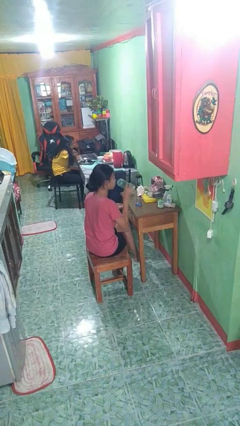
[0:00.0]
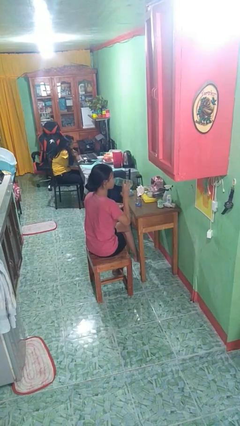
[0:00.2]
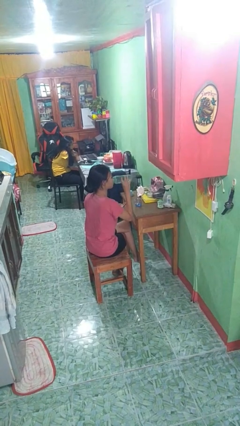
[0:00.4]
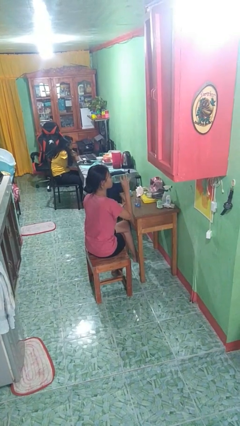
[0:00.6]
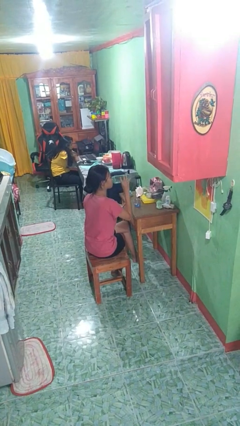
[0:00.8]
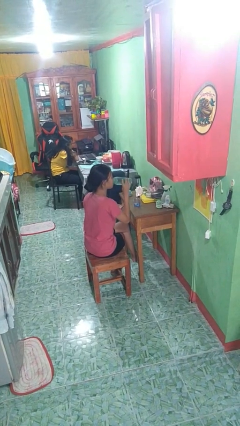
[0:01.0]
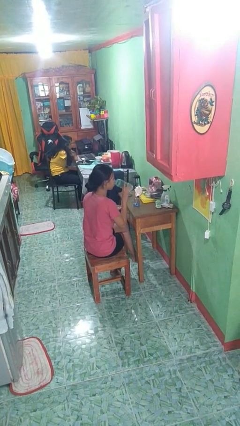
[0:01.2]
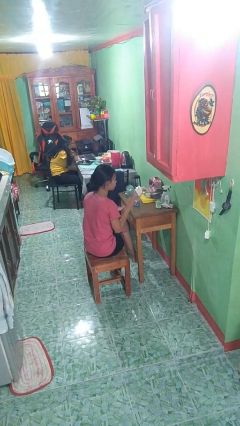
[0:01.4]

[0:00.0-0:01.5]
person drinks from cup

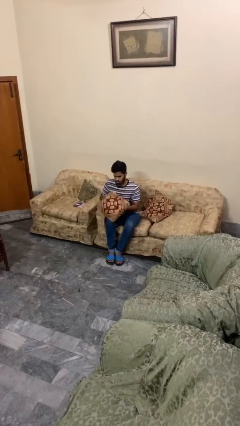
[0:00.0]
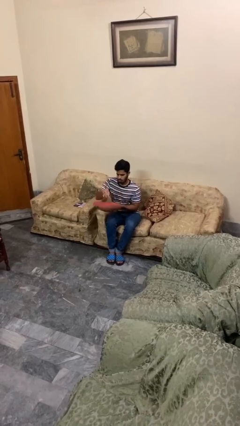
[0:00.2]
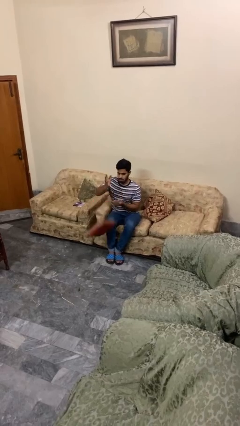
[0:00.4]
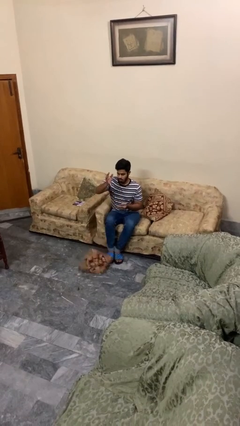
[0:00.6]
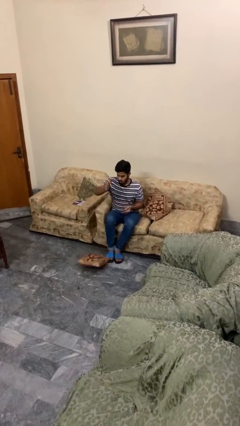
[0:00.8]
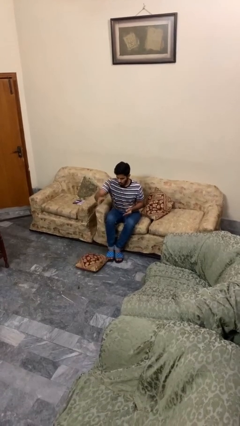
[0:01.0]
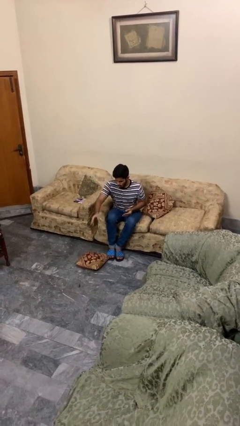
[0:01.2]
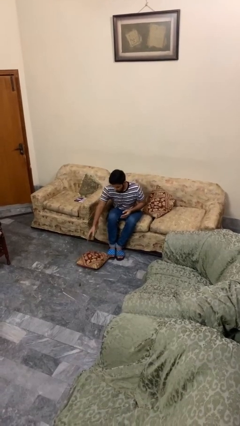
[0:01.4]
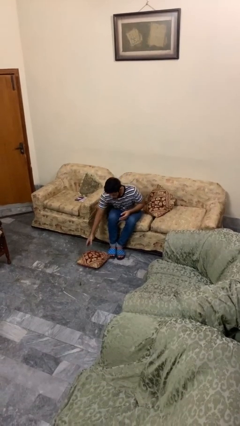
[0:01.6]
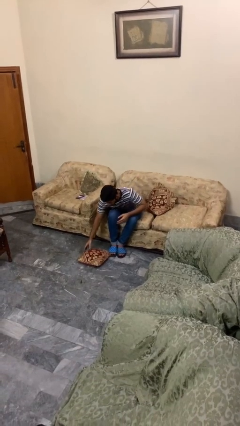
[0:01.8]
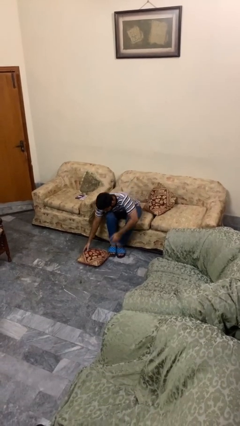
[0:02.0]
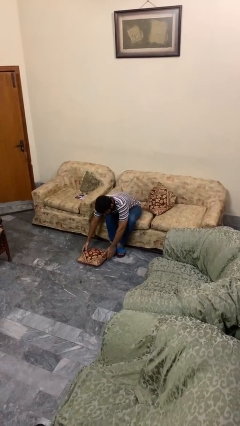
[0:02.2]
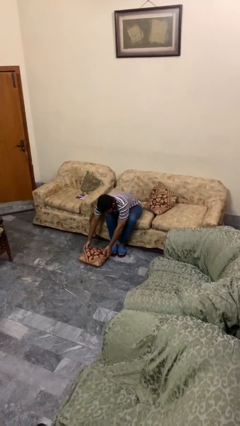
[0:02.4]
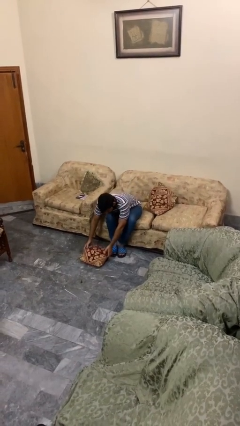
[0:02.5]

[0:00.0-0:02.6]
person drops object

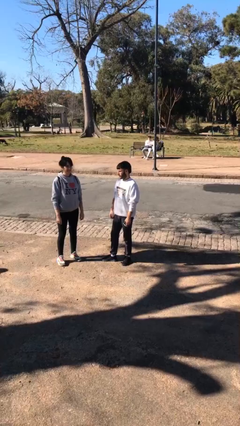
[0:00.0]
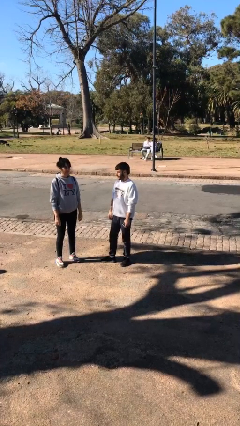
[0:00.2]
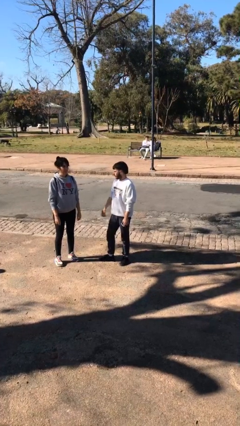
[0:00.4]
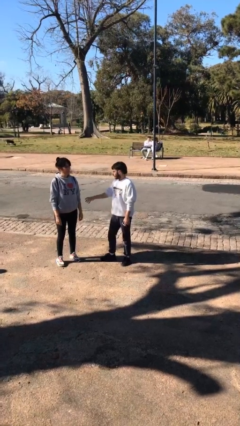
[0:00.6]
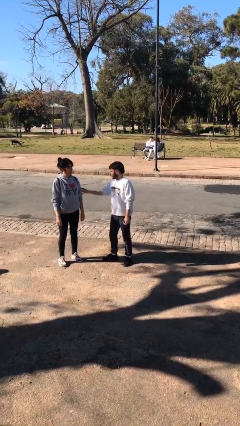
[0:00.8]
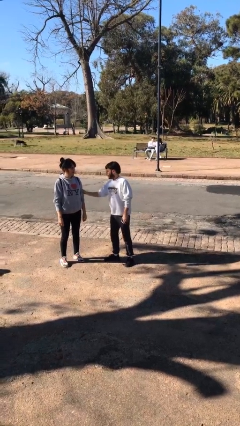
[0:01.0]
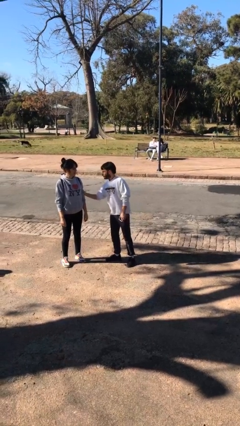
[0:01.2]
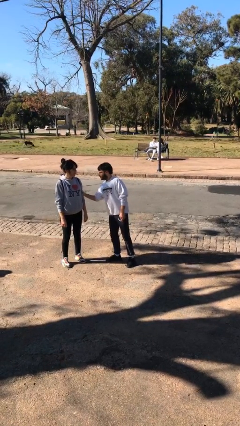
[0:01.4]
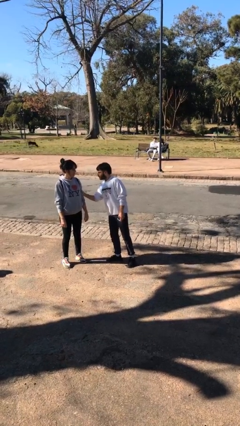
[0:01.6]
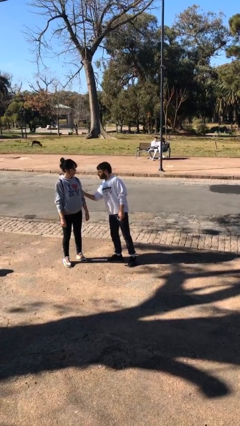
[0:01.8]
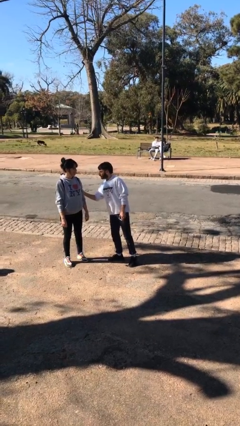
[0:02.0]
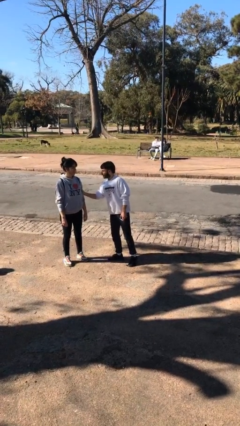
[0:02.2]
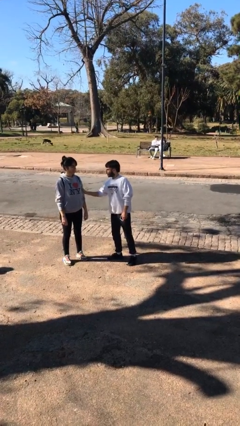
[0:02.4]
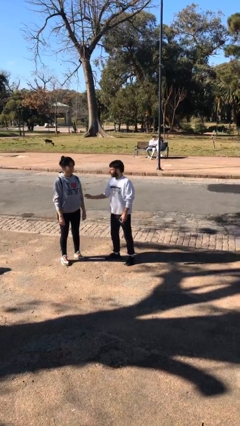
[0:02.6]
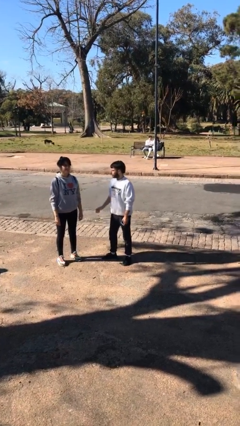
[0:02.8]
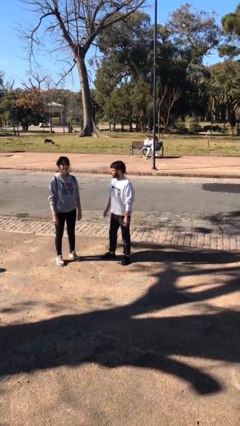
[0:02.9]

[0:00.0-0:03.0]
person grabs person by bicep

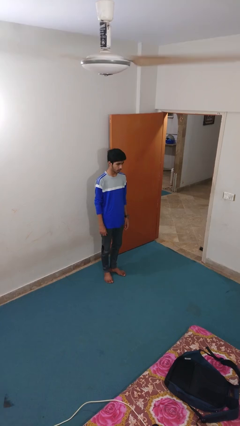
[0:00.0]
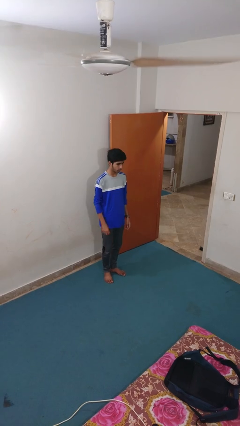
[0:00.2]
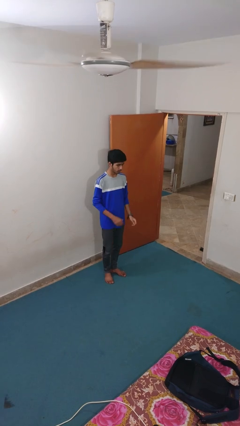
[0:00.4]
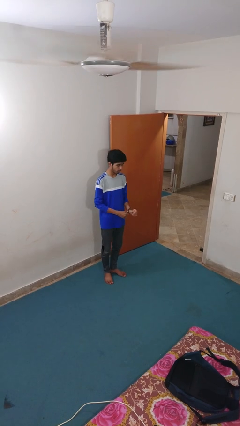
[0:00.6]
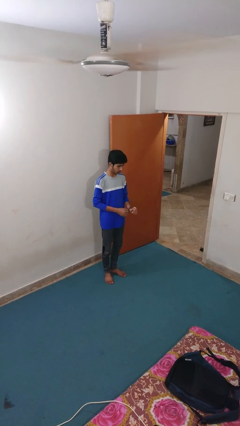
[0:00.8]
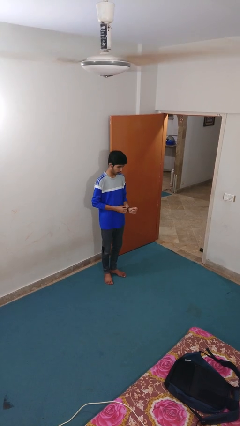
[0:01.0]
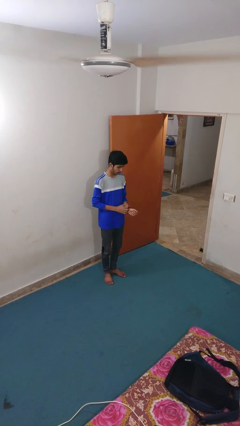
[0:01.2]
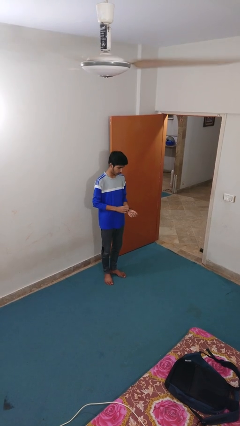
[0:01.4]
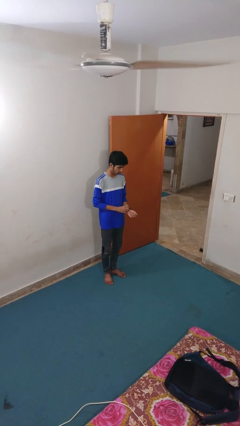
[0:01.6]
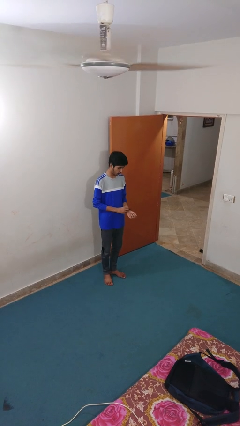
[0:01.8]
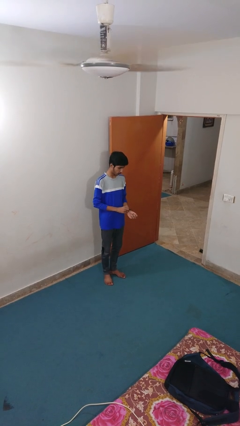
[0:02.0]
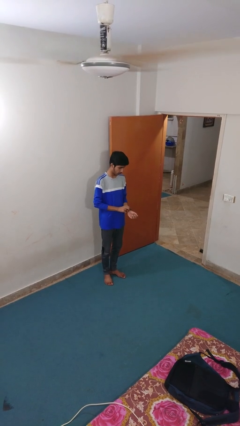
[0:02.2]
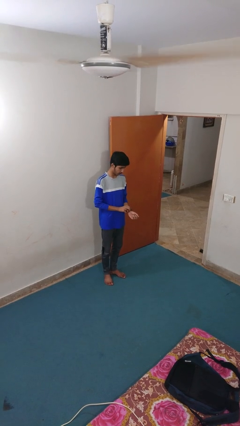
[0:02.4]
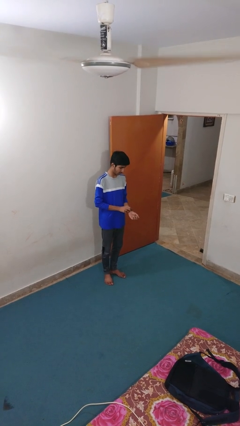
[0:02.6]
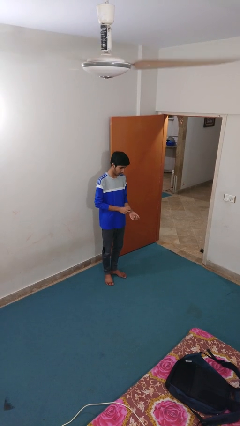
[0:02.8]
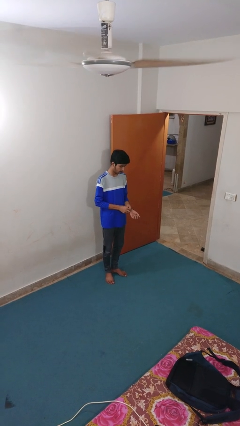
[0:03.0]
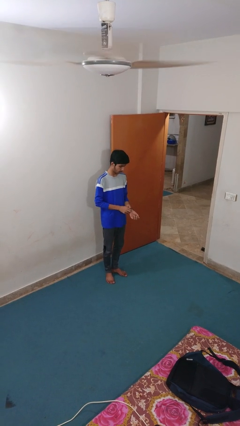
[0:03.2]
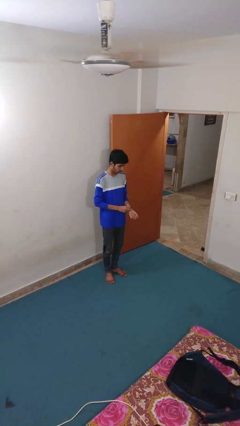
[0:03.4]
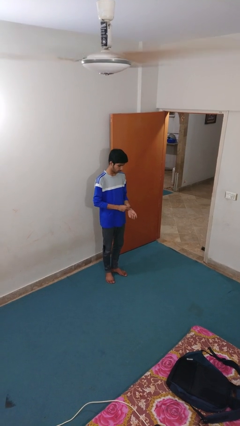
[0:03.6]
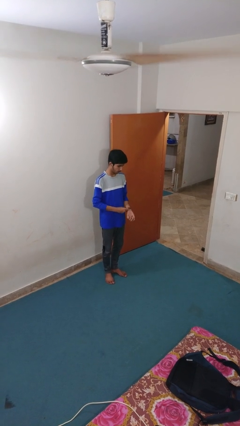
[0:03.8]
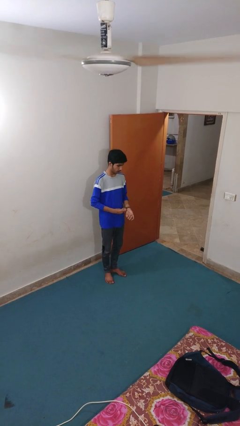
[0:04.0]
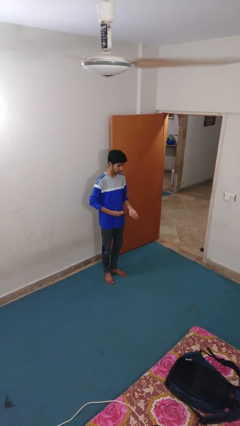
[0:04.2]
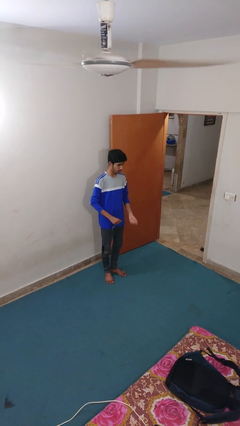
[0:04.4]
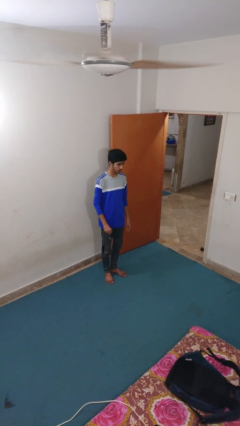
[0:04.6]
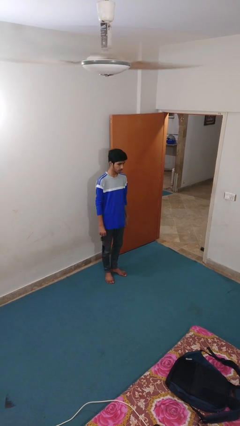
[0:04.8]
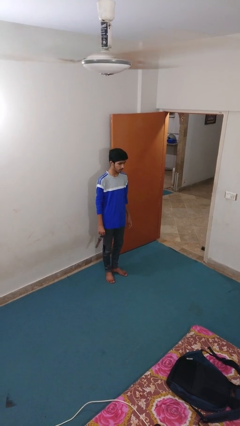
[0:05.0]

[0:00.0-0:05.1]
person takes off wristwatch

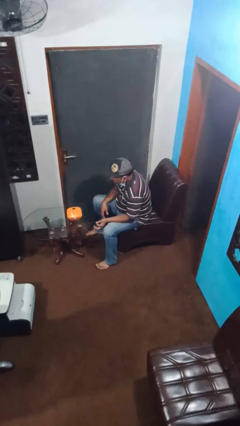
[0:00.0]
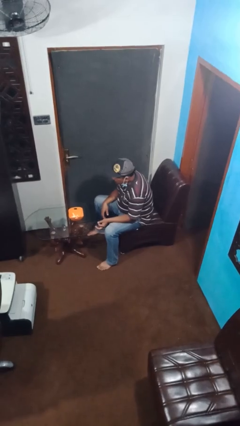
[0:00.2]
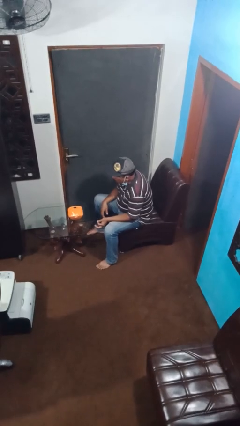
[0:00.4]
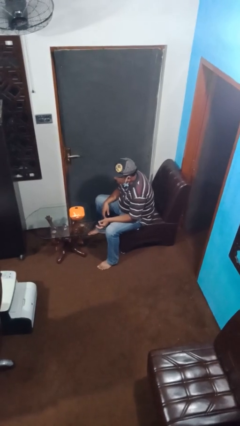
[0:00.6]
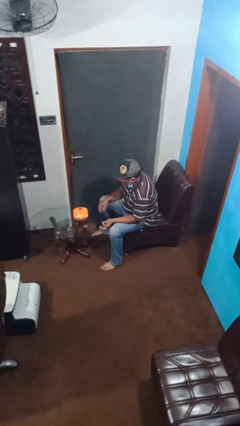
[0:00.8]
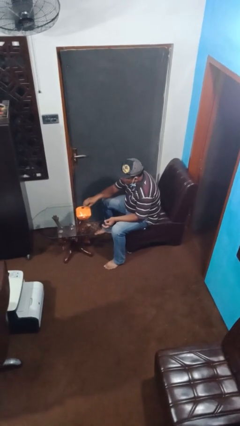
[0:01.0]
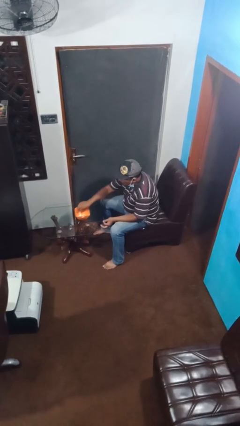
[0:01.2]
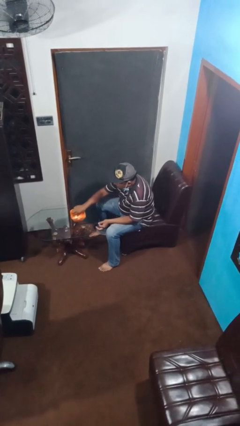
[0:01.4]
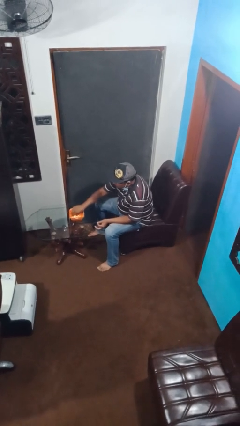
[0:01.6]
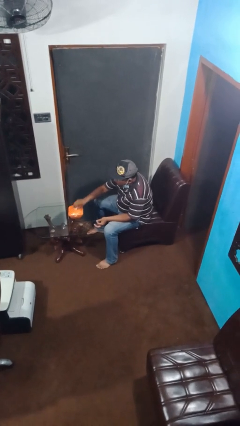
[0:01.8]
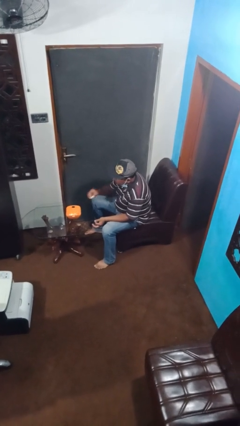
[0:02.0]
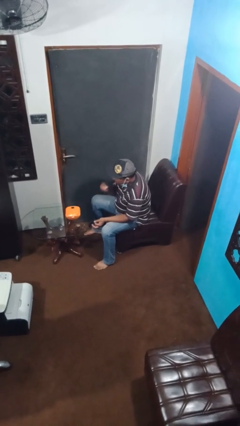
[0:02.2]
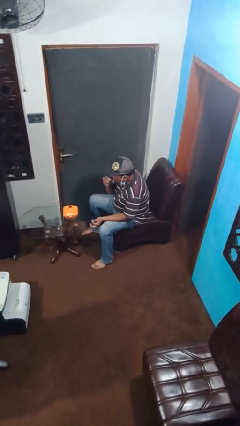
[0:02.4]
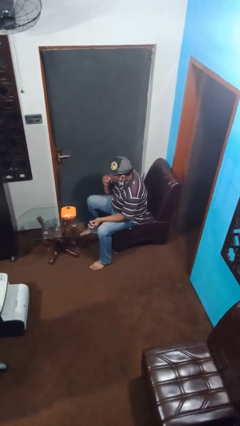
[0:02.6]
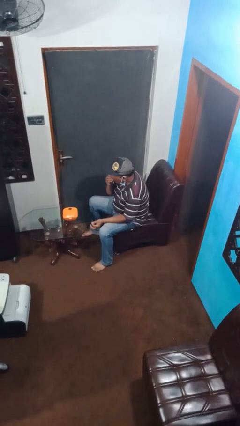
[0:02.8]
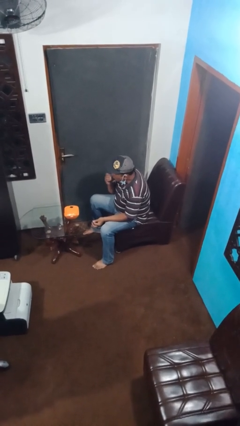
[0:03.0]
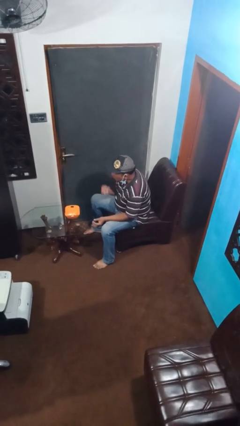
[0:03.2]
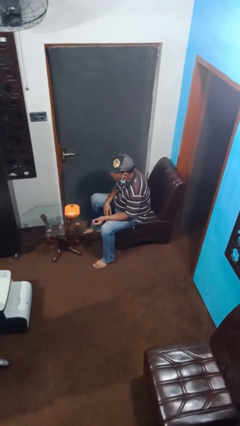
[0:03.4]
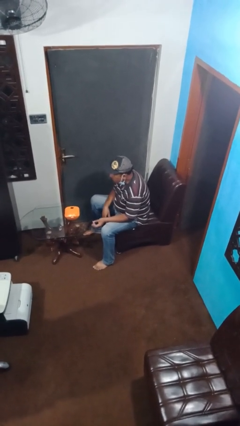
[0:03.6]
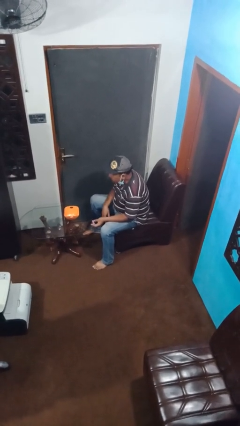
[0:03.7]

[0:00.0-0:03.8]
person eats with hands

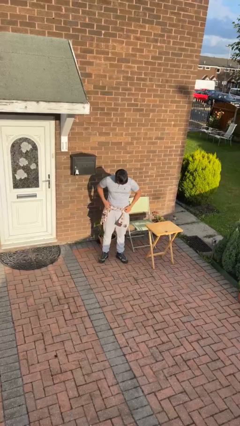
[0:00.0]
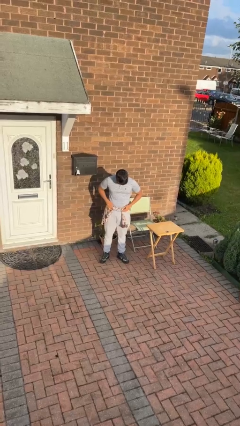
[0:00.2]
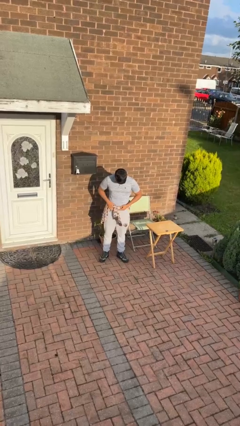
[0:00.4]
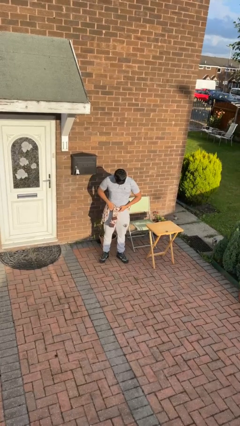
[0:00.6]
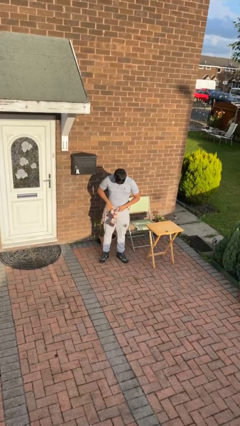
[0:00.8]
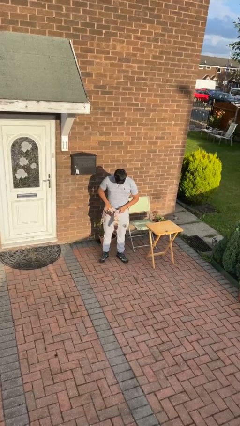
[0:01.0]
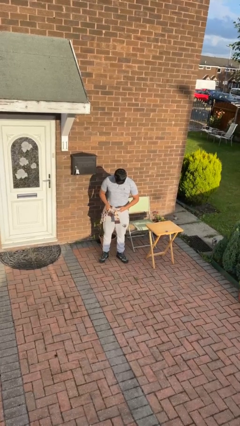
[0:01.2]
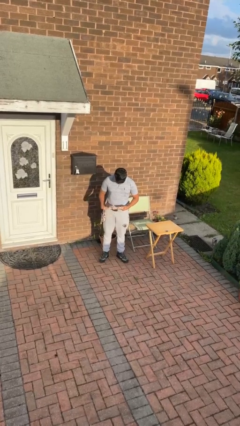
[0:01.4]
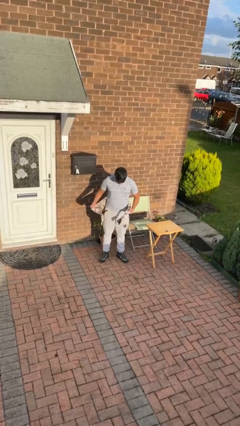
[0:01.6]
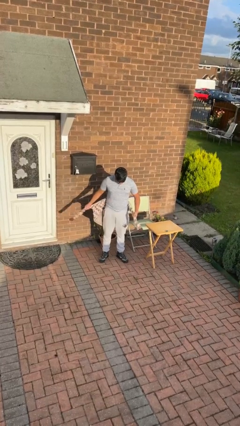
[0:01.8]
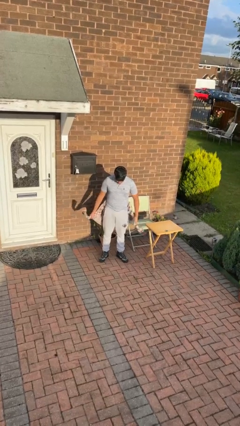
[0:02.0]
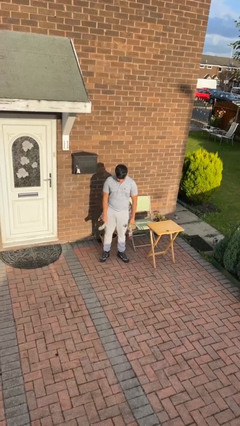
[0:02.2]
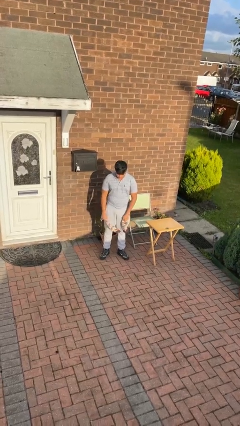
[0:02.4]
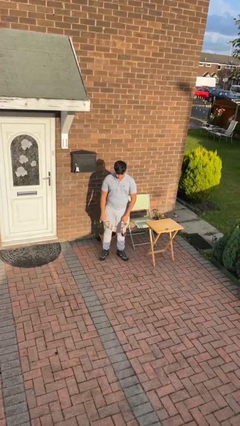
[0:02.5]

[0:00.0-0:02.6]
person unties jacket around waist
